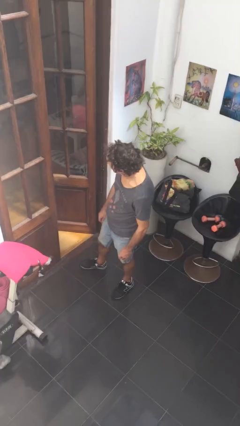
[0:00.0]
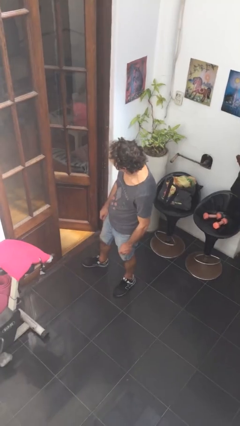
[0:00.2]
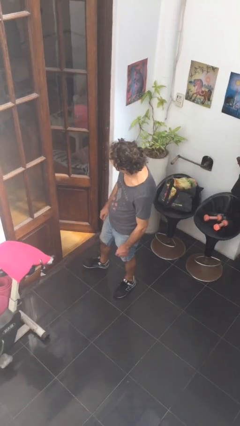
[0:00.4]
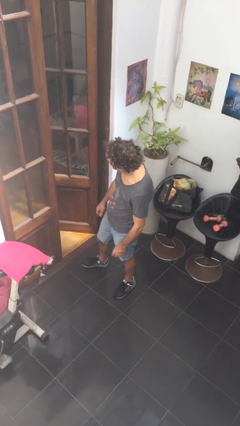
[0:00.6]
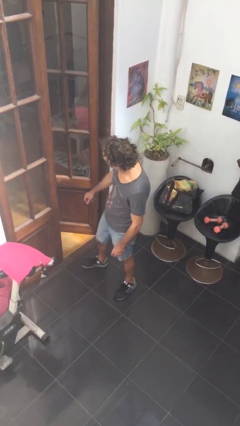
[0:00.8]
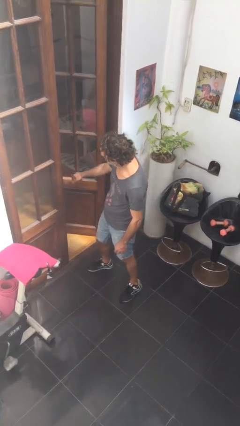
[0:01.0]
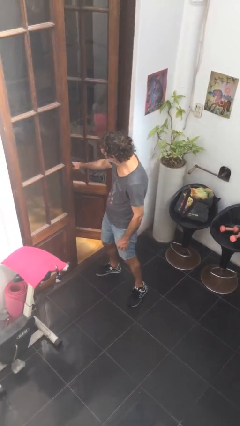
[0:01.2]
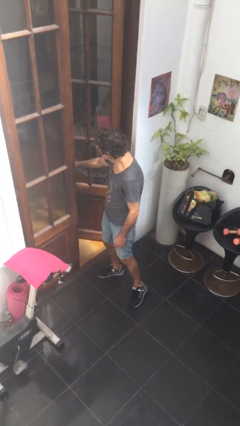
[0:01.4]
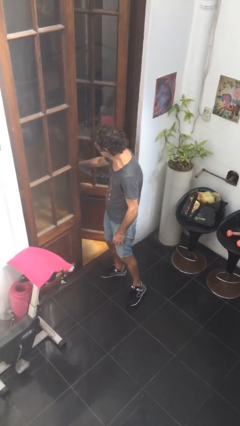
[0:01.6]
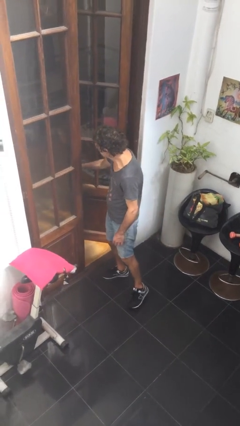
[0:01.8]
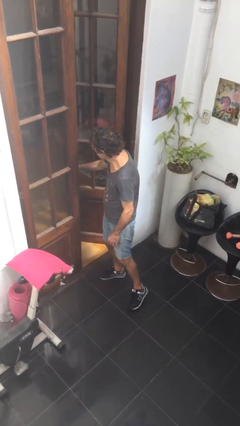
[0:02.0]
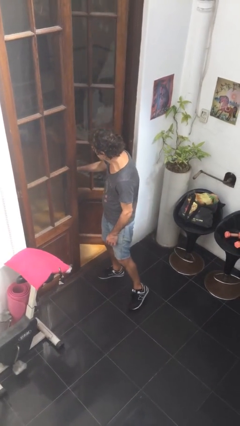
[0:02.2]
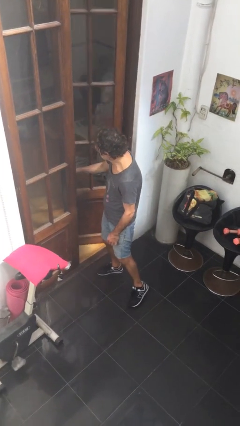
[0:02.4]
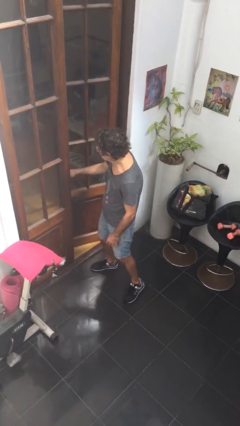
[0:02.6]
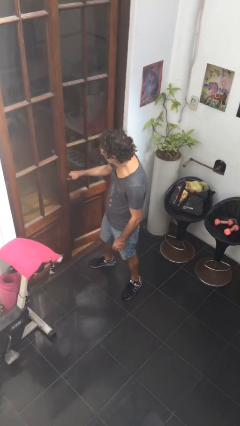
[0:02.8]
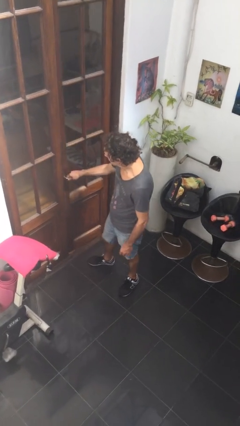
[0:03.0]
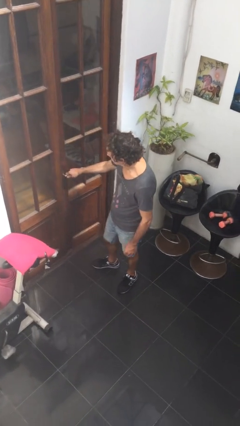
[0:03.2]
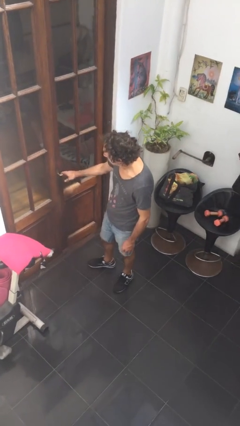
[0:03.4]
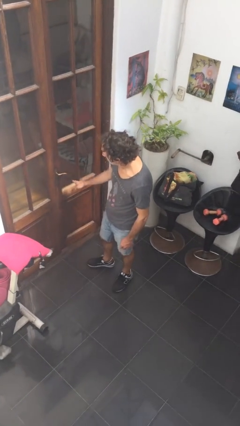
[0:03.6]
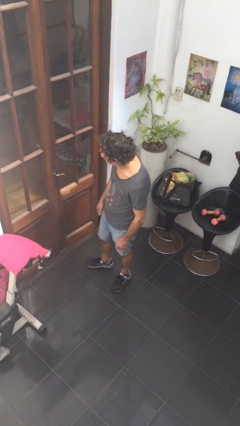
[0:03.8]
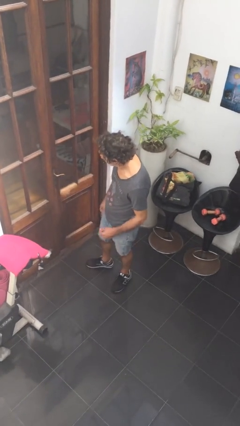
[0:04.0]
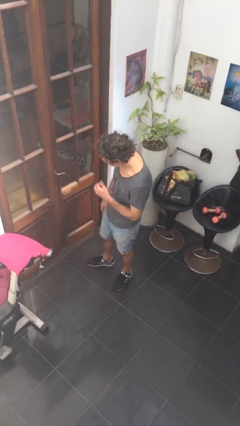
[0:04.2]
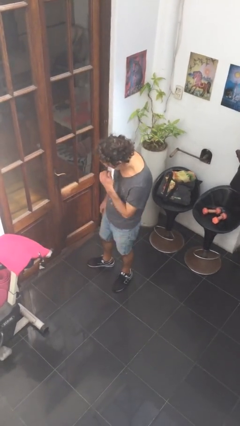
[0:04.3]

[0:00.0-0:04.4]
person closes facility door

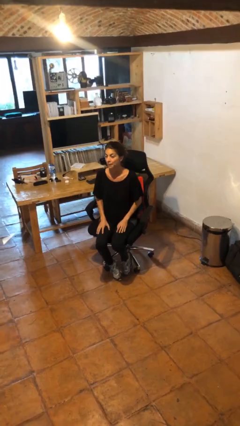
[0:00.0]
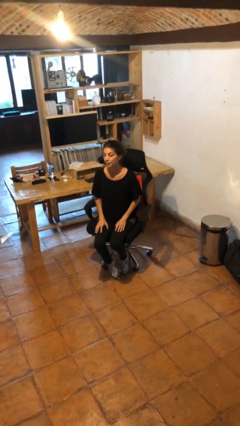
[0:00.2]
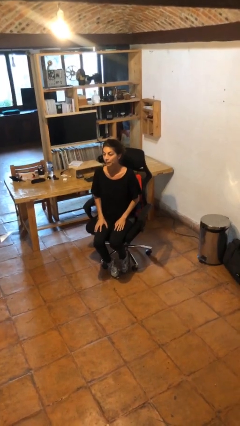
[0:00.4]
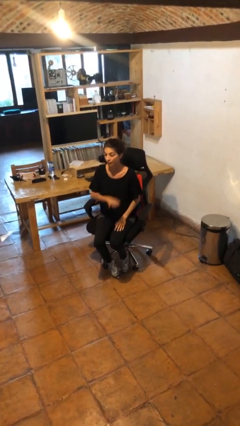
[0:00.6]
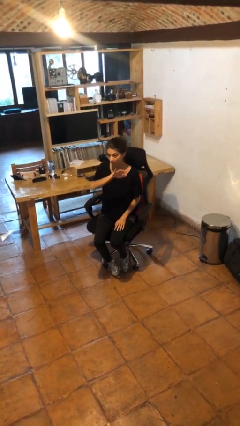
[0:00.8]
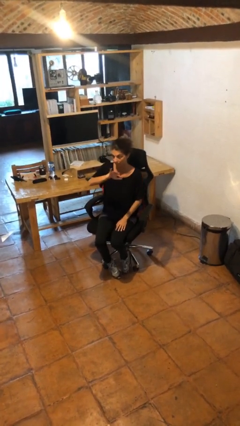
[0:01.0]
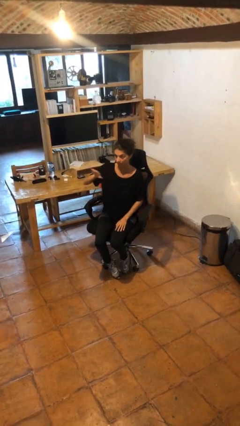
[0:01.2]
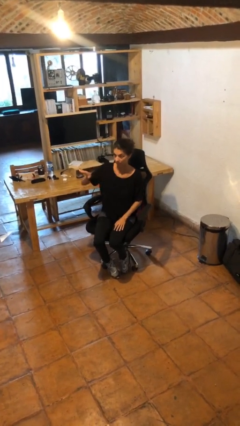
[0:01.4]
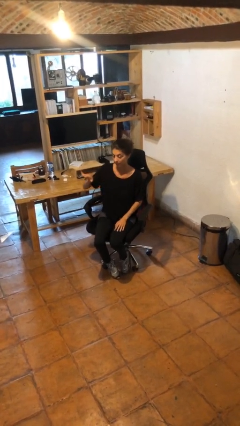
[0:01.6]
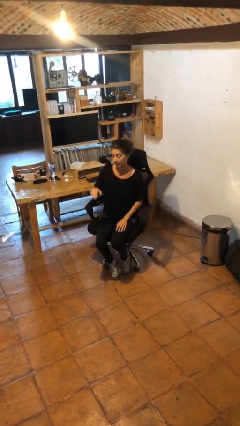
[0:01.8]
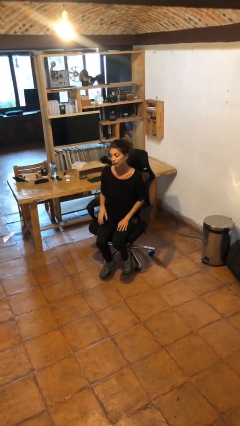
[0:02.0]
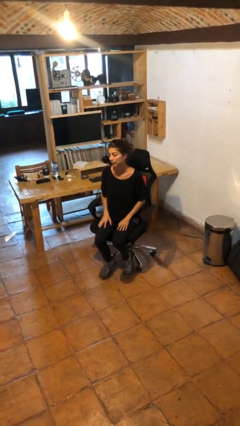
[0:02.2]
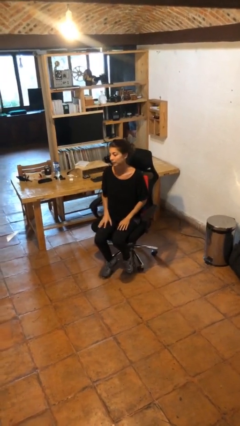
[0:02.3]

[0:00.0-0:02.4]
person gestures swipe right

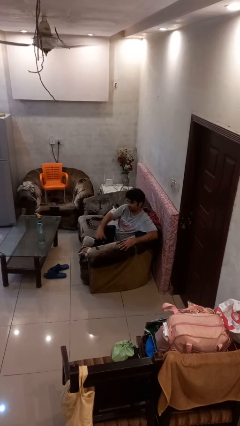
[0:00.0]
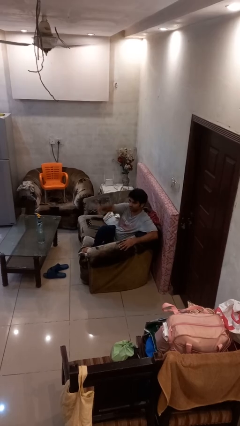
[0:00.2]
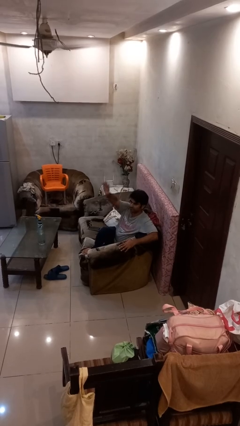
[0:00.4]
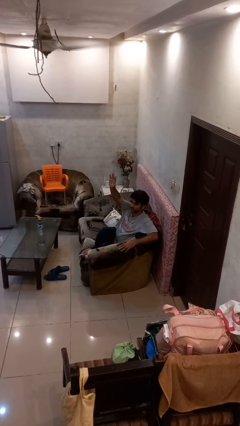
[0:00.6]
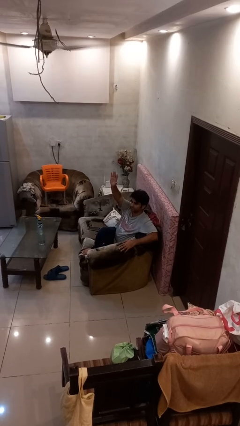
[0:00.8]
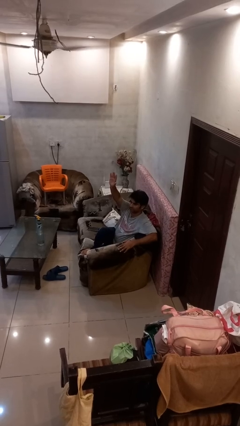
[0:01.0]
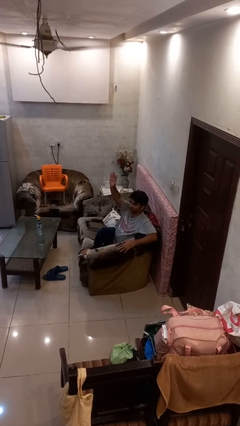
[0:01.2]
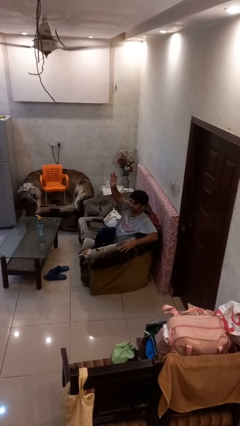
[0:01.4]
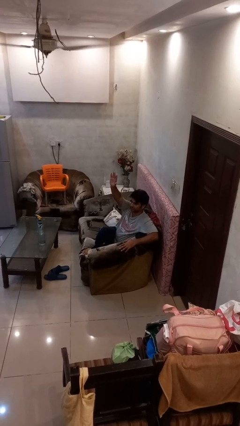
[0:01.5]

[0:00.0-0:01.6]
person gestures raise hand

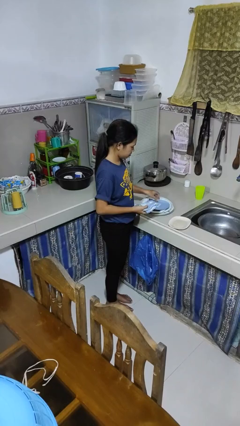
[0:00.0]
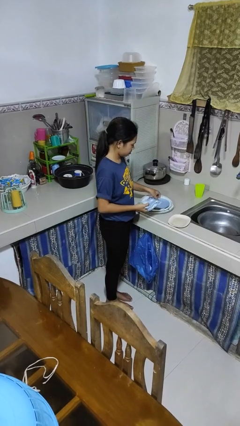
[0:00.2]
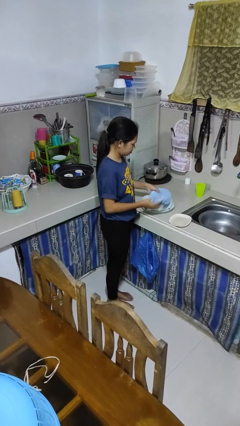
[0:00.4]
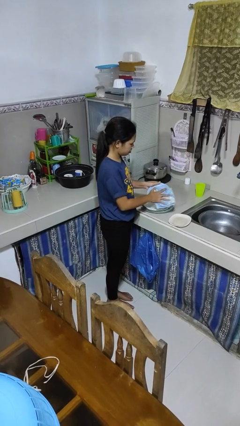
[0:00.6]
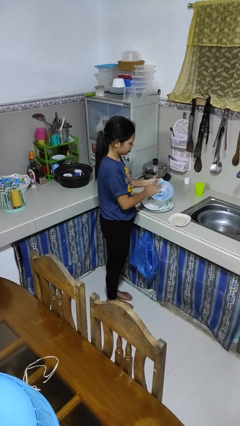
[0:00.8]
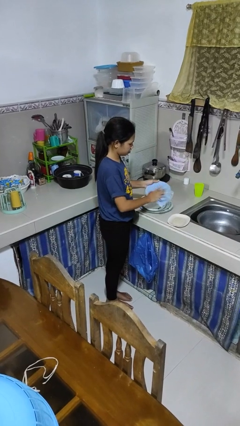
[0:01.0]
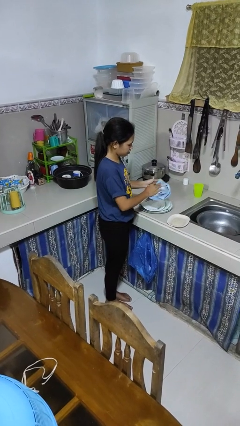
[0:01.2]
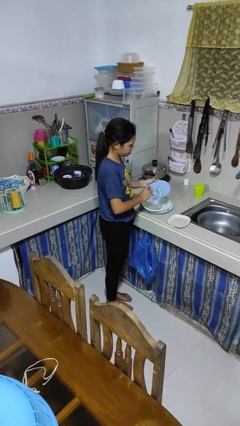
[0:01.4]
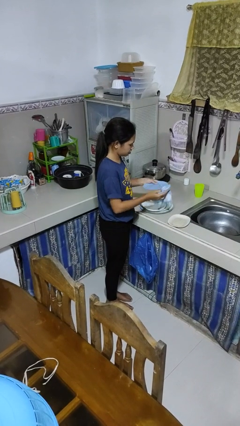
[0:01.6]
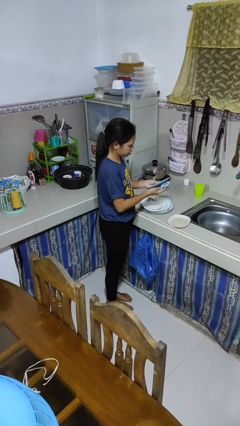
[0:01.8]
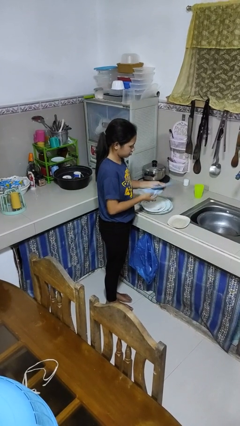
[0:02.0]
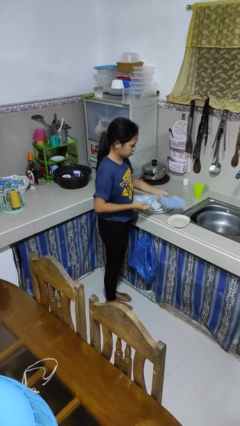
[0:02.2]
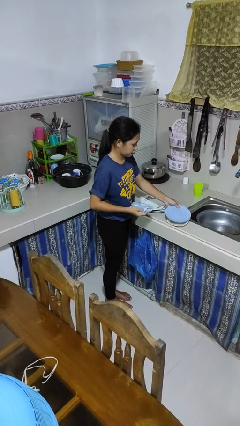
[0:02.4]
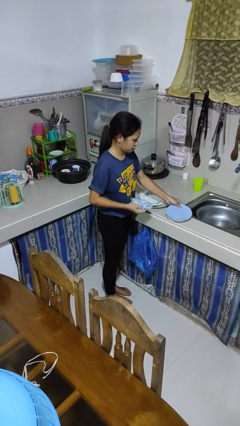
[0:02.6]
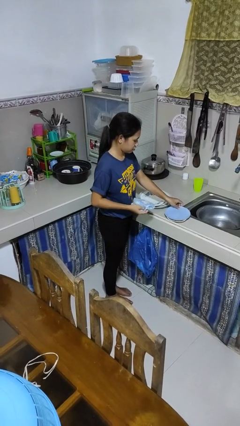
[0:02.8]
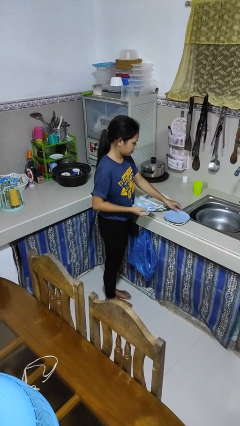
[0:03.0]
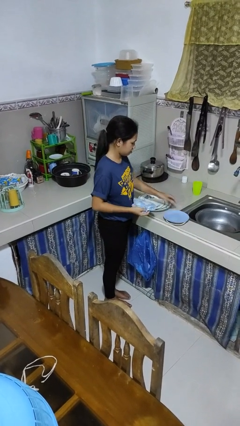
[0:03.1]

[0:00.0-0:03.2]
person dries dish

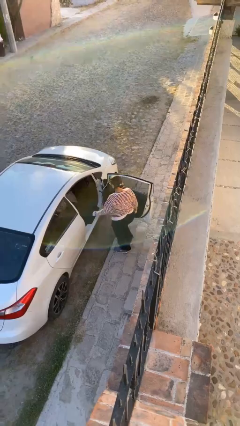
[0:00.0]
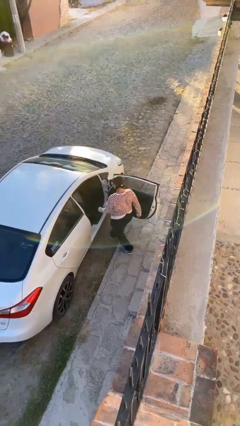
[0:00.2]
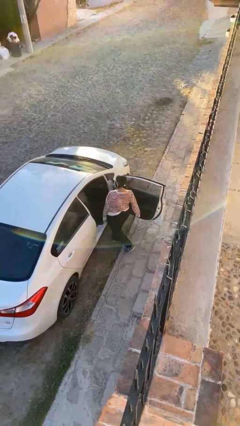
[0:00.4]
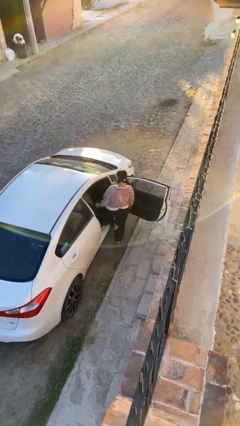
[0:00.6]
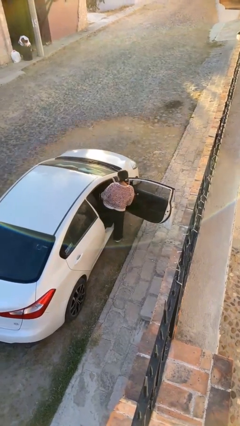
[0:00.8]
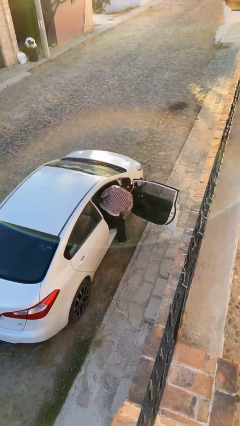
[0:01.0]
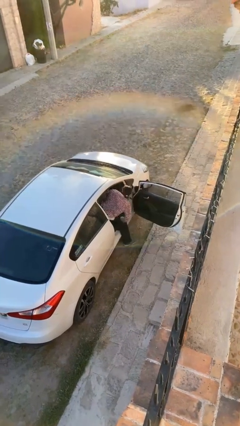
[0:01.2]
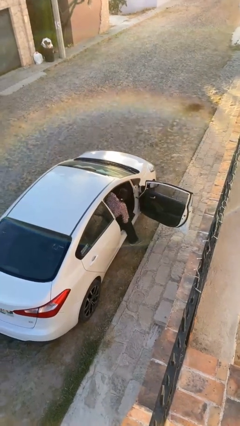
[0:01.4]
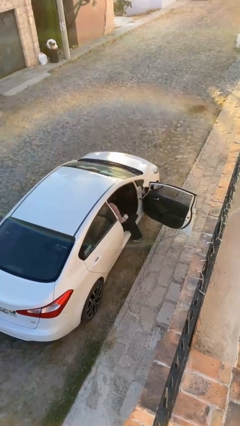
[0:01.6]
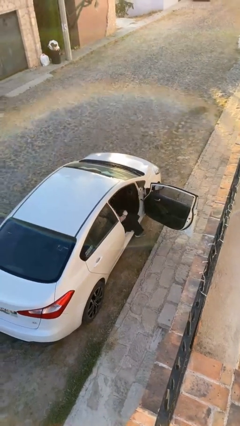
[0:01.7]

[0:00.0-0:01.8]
person enters car

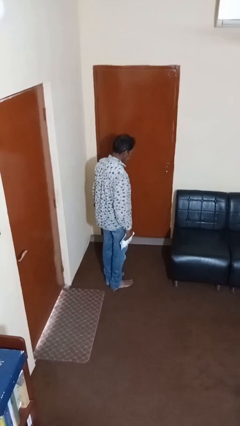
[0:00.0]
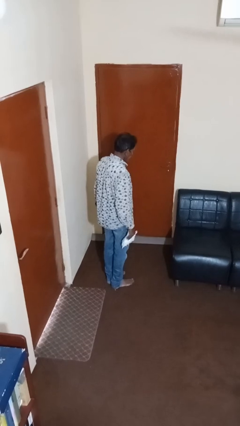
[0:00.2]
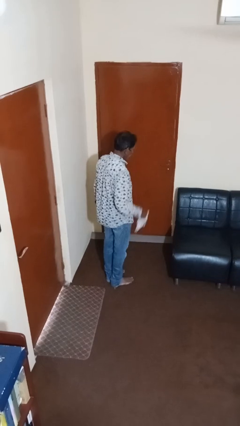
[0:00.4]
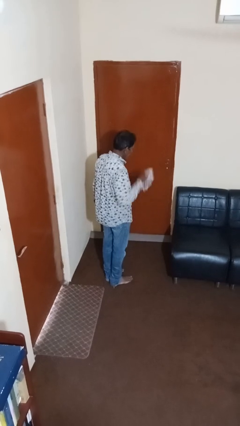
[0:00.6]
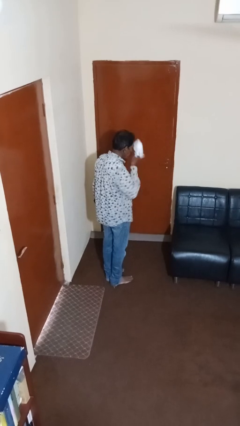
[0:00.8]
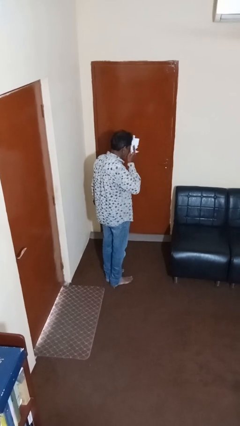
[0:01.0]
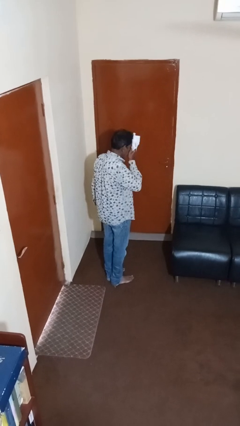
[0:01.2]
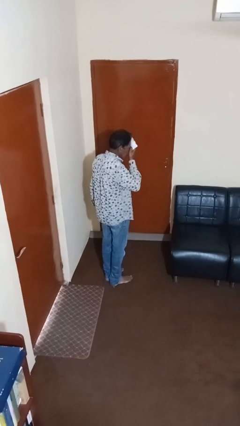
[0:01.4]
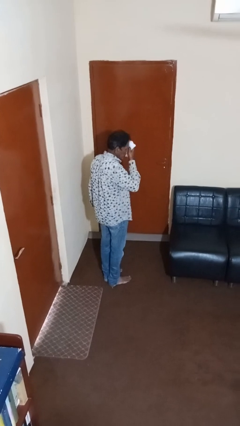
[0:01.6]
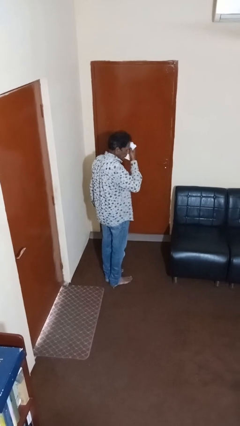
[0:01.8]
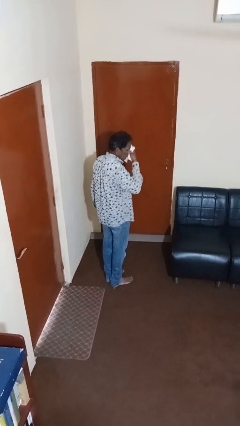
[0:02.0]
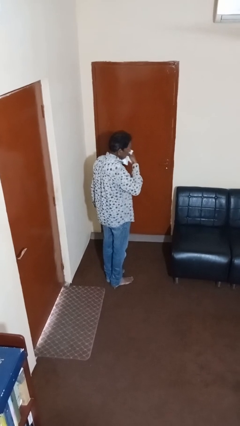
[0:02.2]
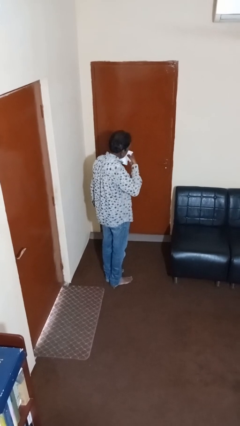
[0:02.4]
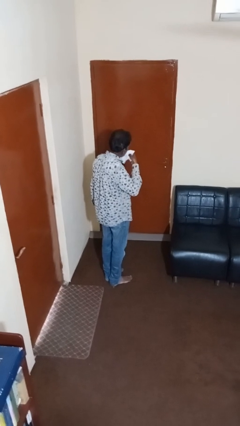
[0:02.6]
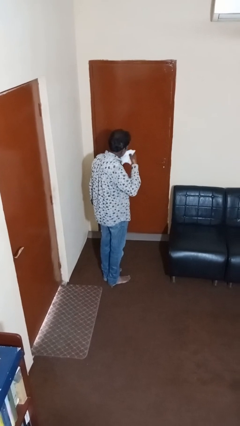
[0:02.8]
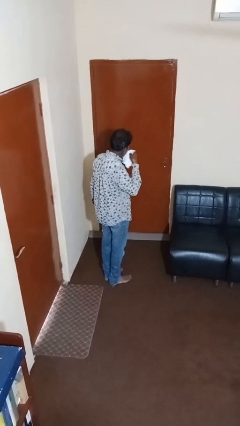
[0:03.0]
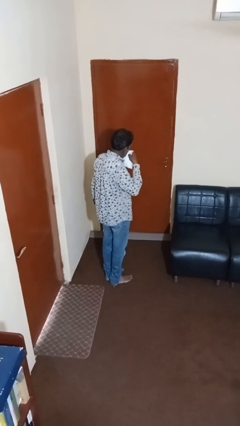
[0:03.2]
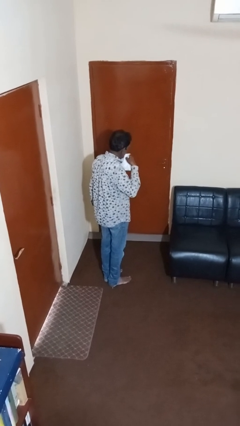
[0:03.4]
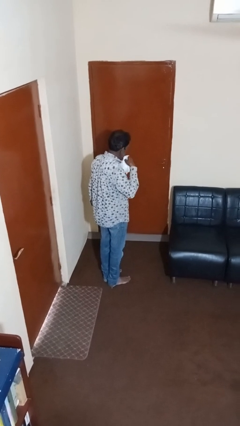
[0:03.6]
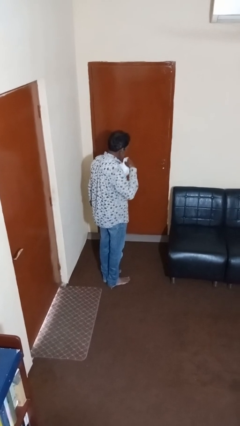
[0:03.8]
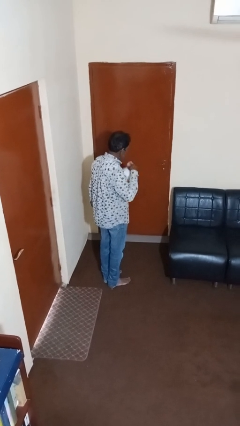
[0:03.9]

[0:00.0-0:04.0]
person wipes mouth with napkin
